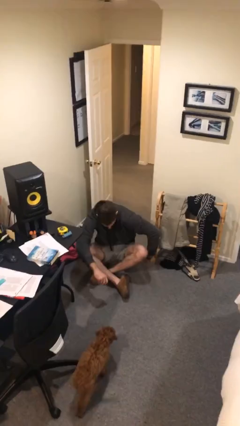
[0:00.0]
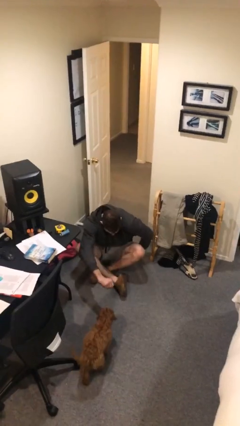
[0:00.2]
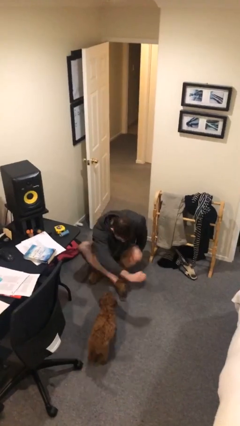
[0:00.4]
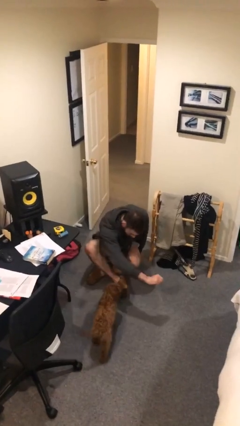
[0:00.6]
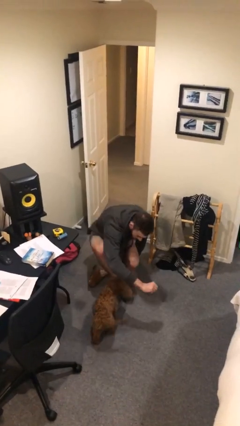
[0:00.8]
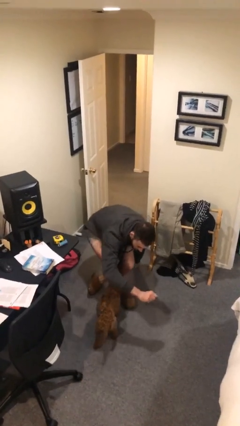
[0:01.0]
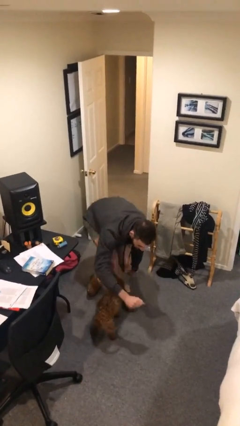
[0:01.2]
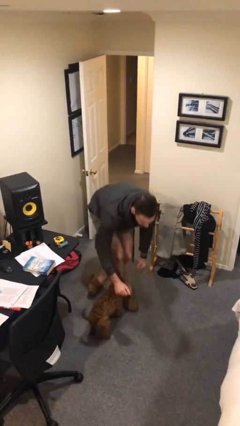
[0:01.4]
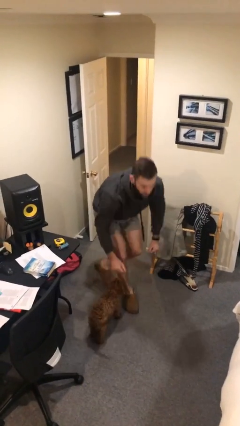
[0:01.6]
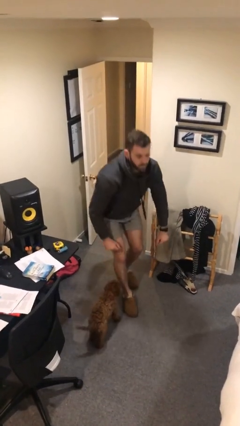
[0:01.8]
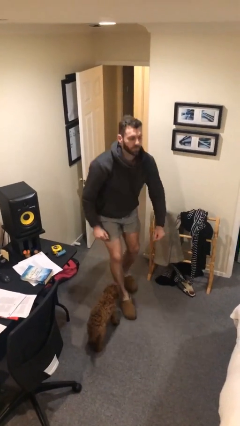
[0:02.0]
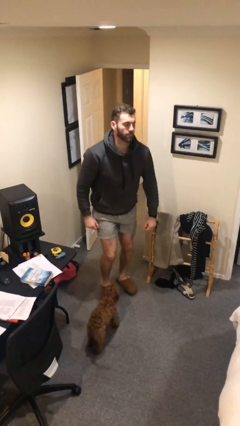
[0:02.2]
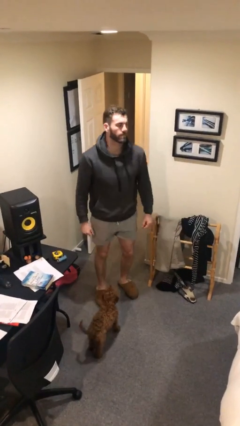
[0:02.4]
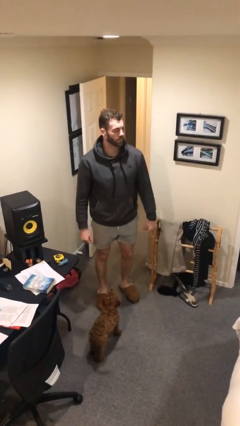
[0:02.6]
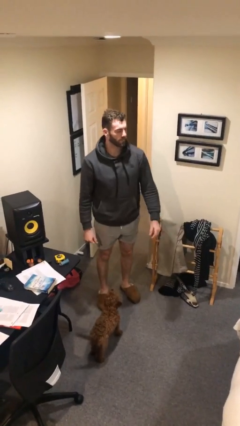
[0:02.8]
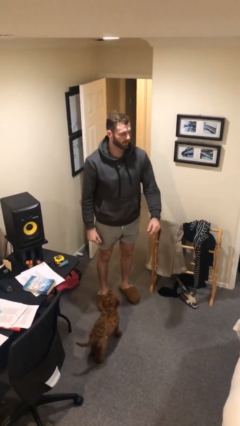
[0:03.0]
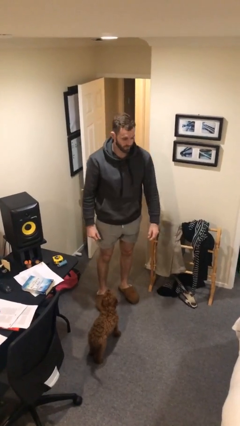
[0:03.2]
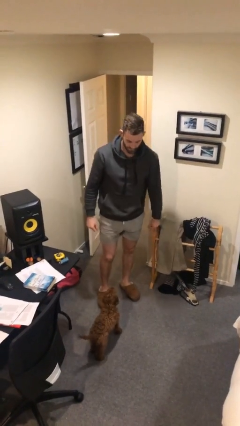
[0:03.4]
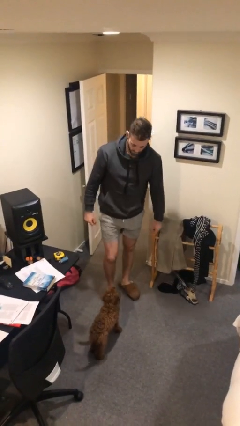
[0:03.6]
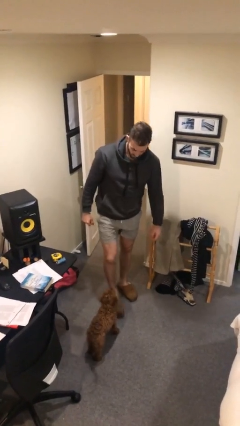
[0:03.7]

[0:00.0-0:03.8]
person stands up from floor

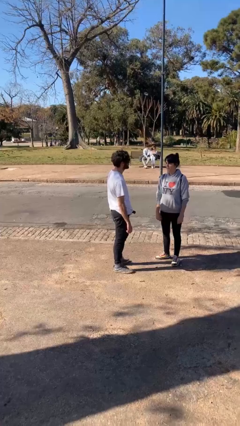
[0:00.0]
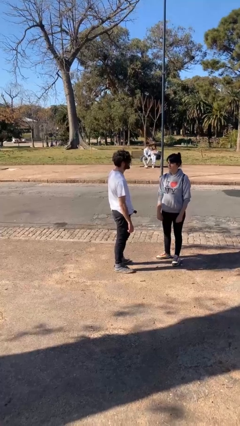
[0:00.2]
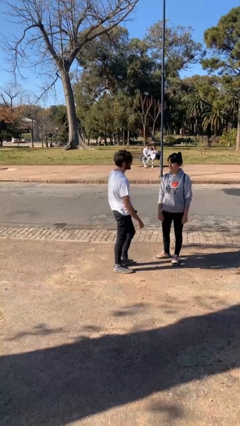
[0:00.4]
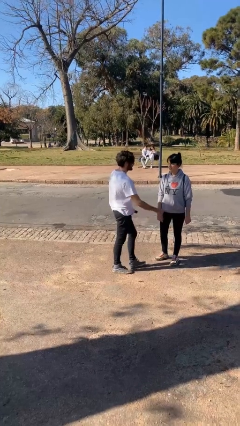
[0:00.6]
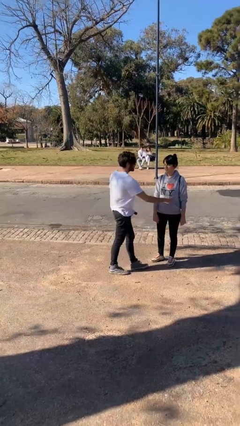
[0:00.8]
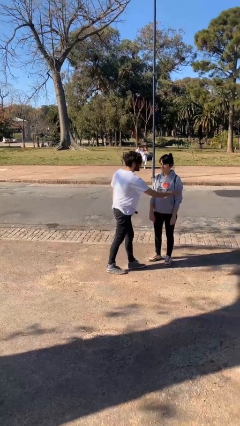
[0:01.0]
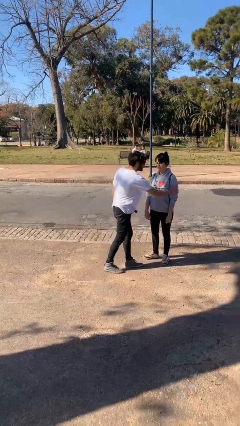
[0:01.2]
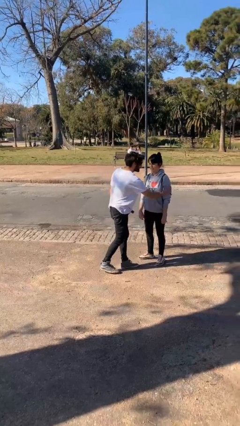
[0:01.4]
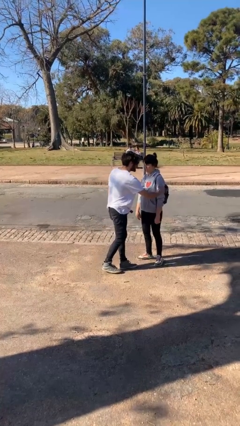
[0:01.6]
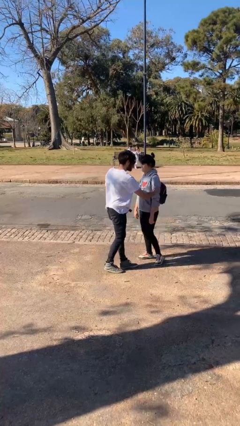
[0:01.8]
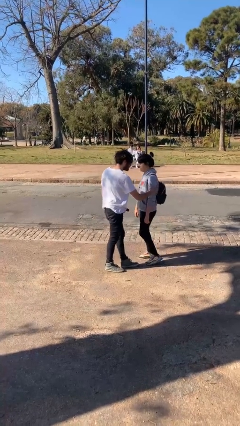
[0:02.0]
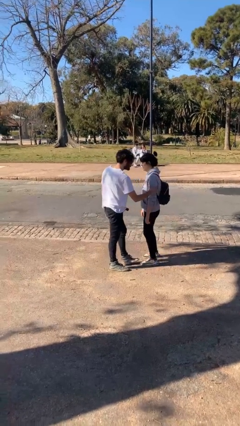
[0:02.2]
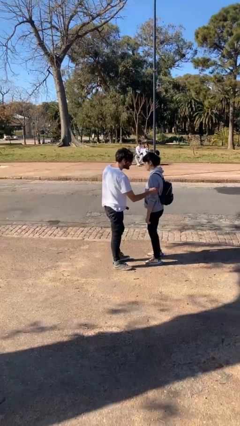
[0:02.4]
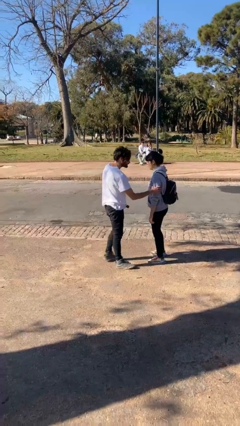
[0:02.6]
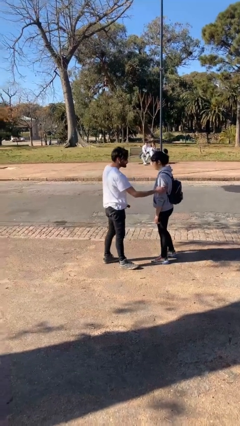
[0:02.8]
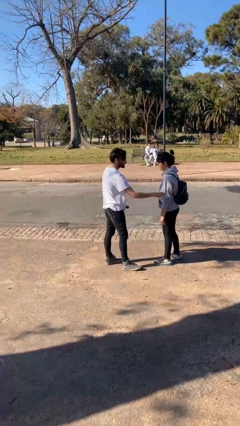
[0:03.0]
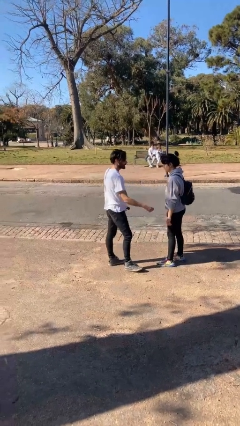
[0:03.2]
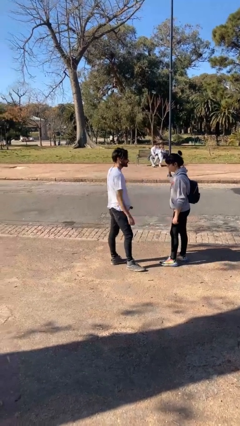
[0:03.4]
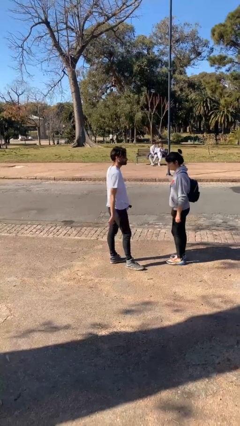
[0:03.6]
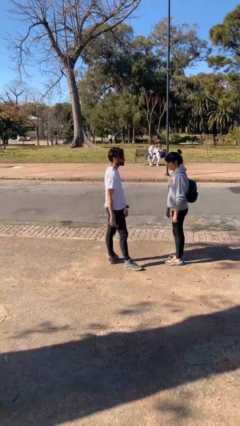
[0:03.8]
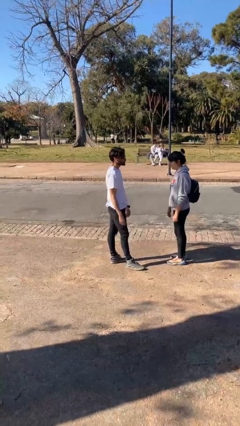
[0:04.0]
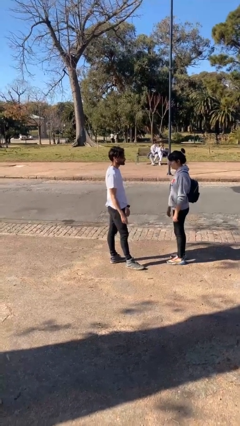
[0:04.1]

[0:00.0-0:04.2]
person grabs person by bicep

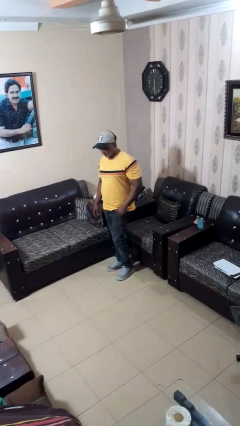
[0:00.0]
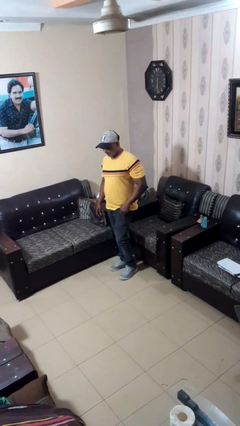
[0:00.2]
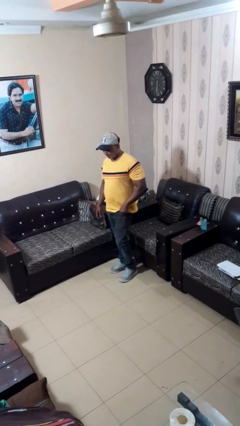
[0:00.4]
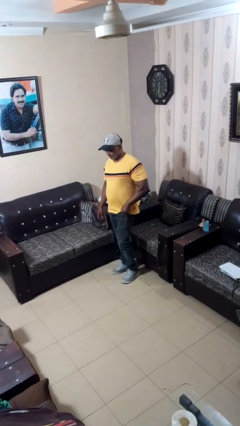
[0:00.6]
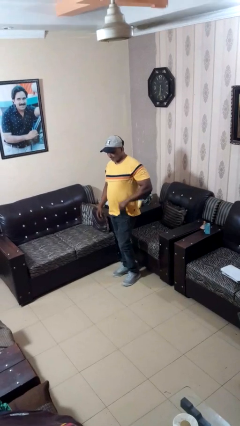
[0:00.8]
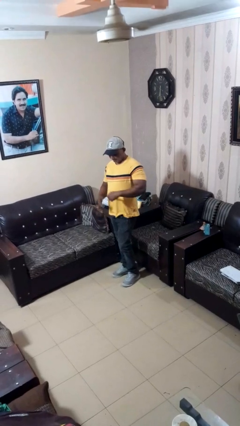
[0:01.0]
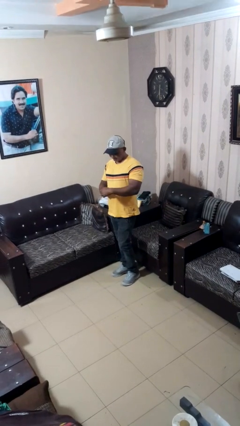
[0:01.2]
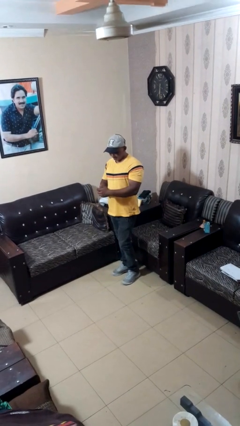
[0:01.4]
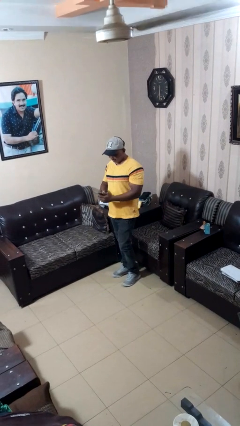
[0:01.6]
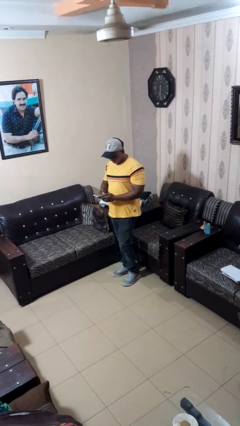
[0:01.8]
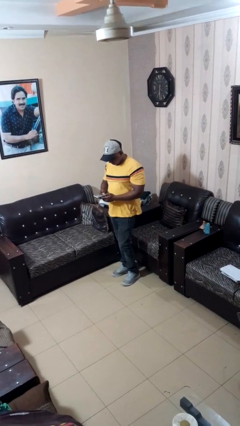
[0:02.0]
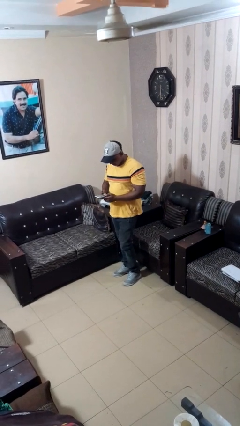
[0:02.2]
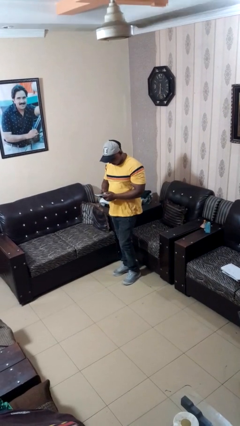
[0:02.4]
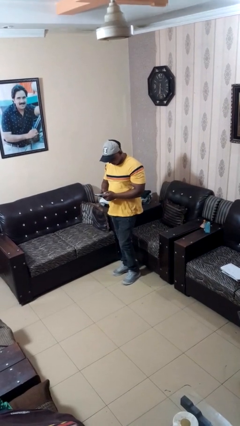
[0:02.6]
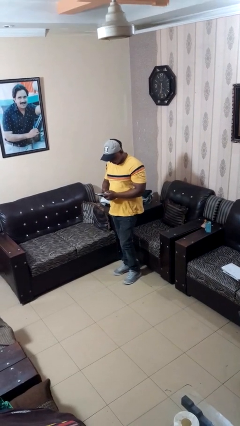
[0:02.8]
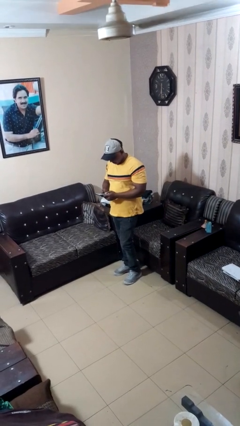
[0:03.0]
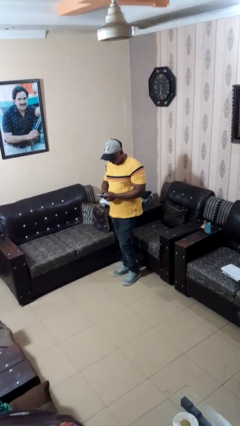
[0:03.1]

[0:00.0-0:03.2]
person takes phone from pocket

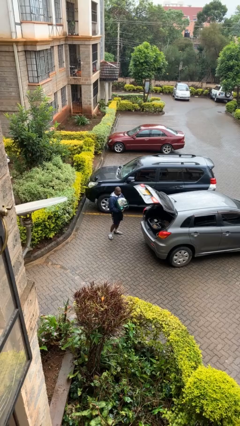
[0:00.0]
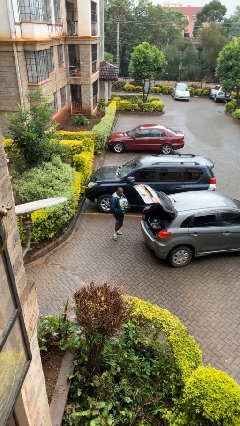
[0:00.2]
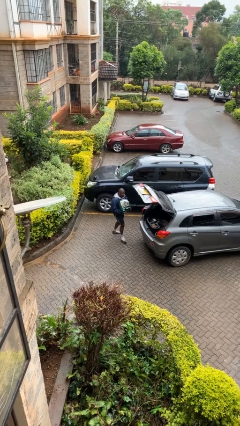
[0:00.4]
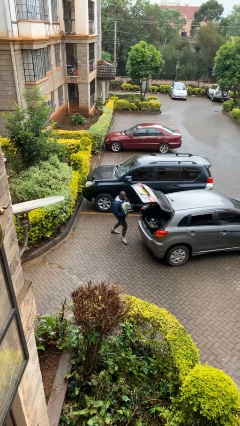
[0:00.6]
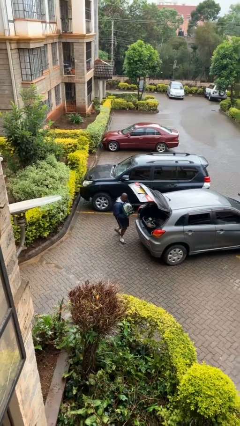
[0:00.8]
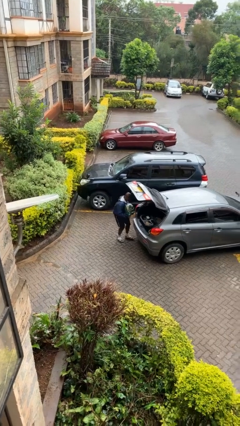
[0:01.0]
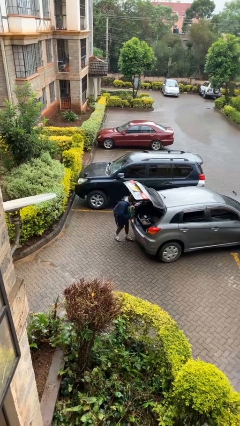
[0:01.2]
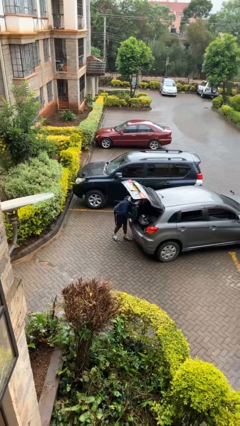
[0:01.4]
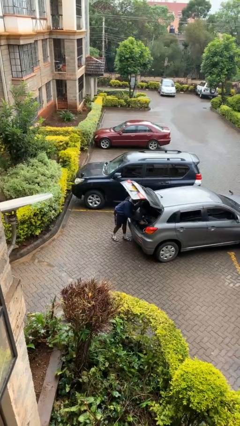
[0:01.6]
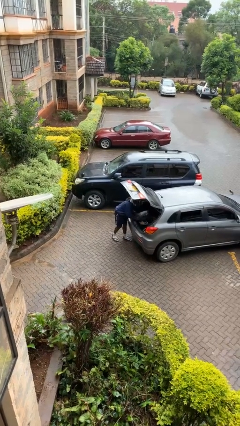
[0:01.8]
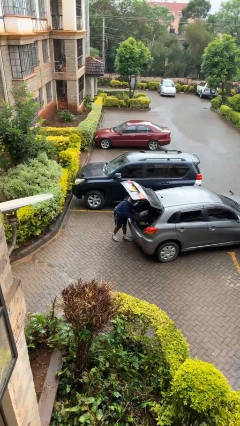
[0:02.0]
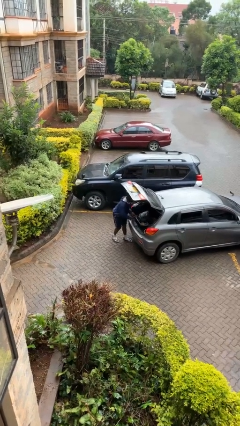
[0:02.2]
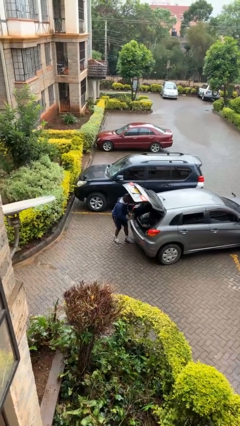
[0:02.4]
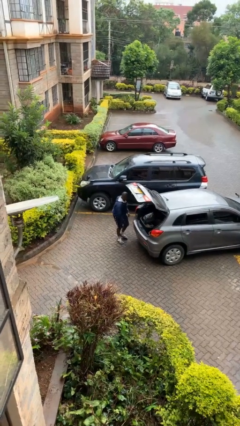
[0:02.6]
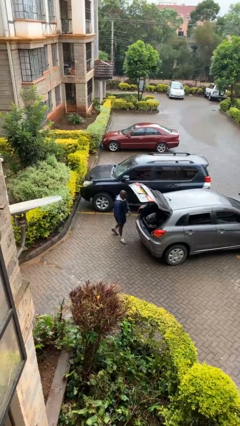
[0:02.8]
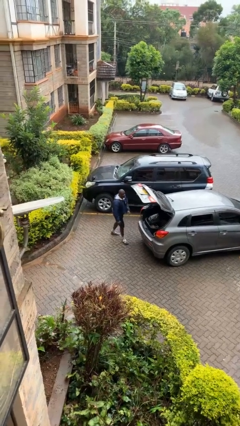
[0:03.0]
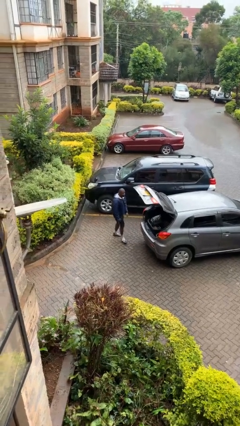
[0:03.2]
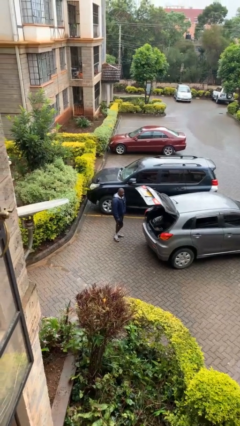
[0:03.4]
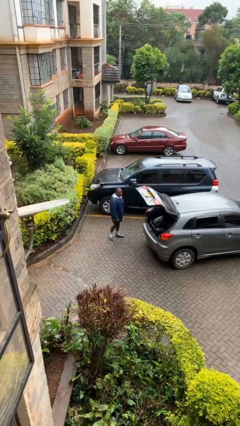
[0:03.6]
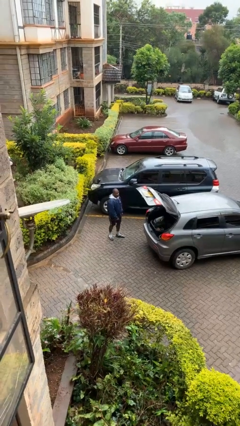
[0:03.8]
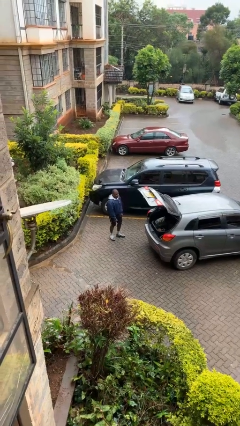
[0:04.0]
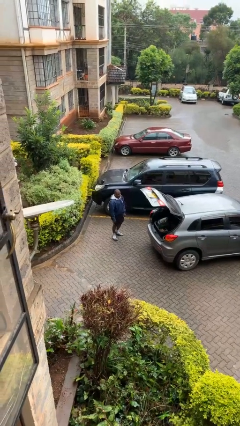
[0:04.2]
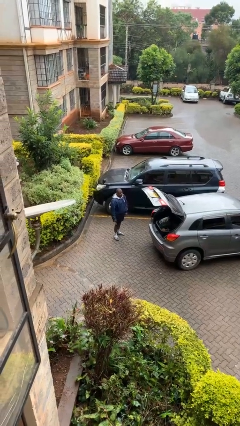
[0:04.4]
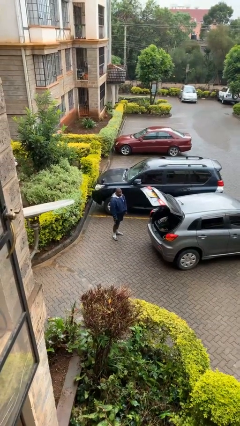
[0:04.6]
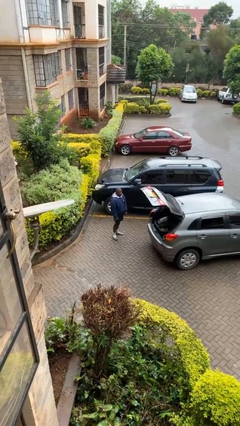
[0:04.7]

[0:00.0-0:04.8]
person loads car

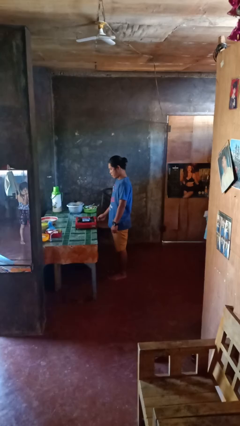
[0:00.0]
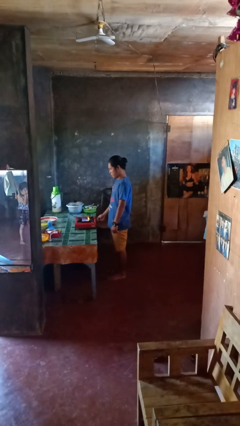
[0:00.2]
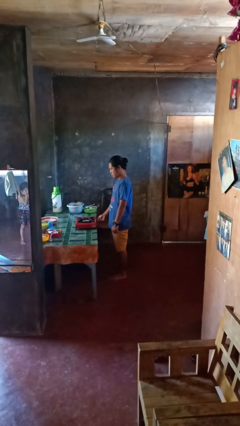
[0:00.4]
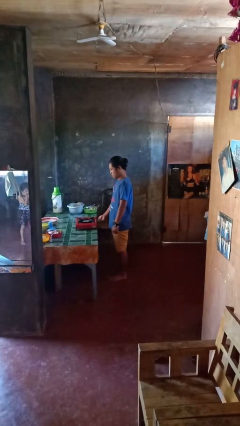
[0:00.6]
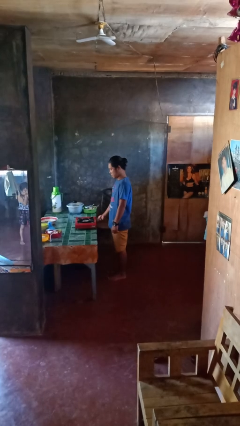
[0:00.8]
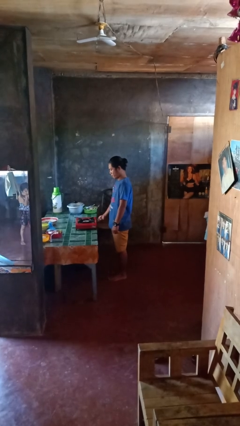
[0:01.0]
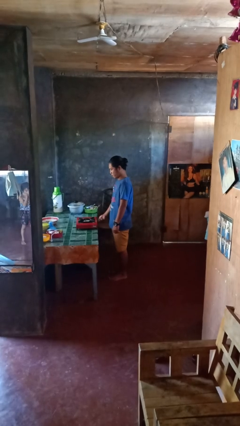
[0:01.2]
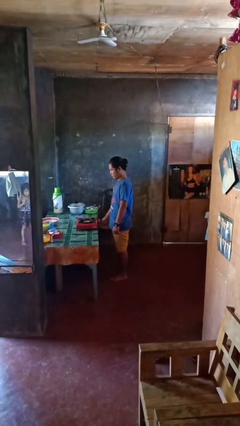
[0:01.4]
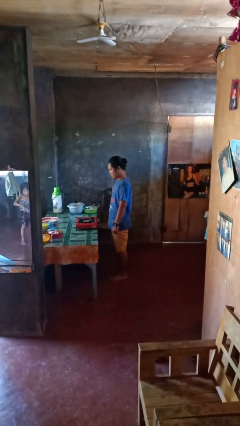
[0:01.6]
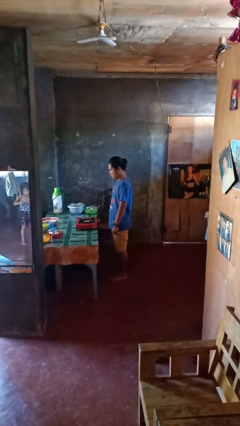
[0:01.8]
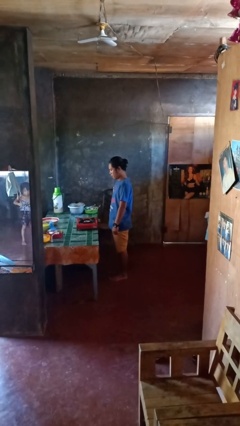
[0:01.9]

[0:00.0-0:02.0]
person turns off stovetop
